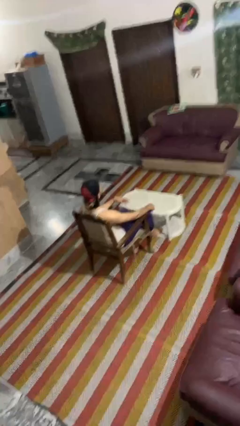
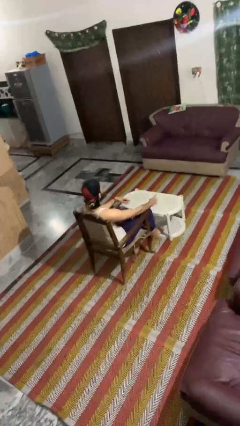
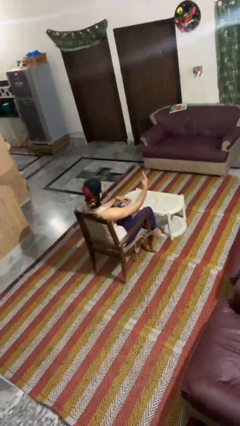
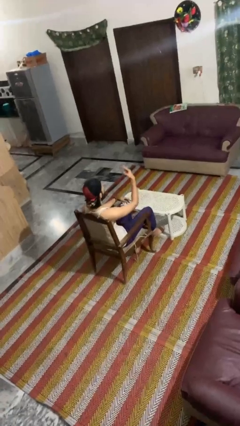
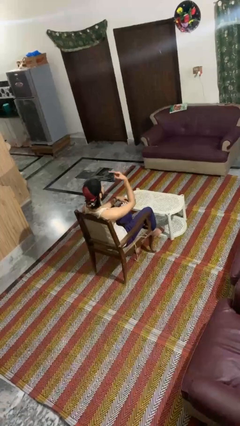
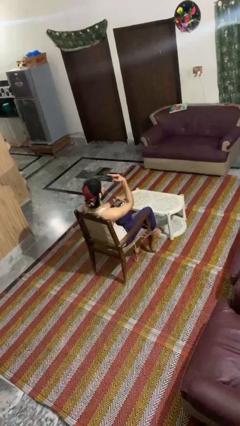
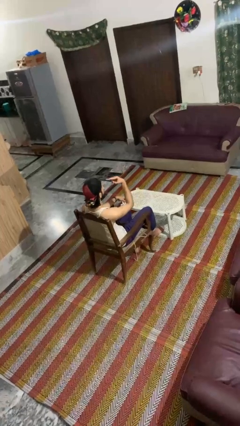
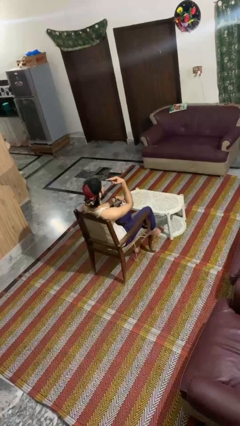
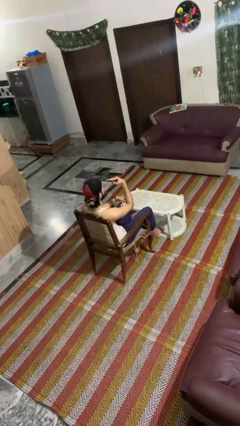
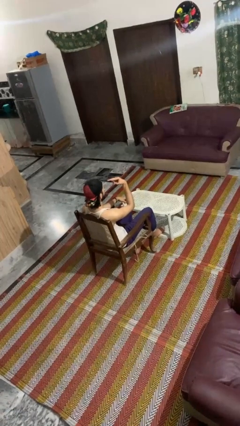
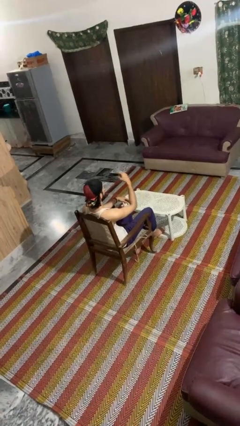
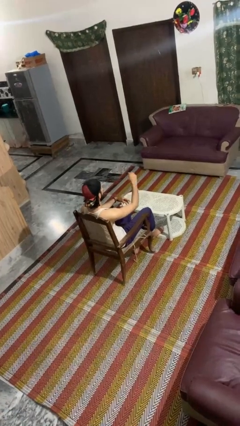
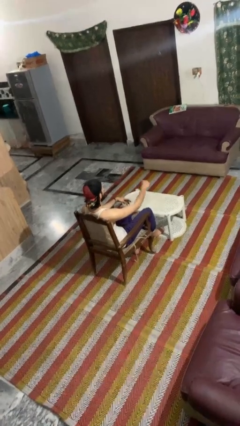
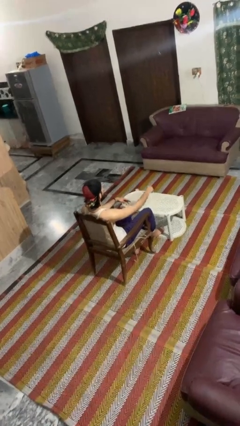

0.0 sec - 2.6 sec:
person gestures watch closely

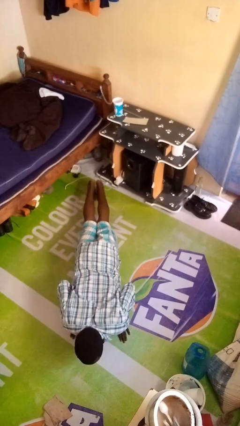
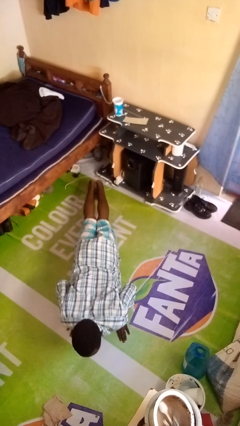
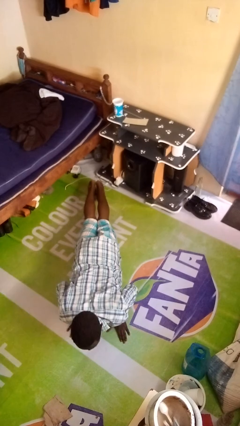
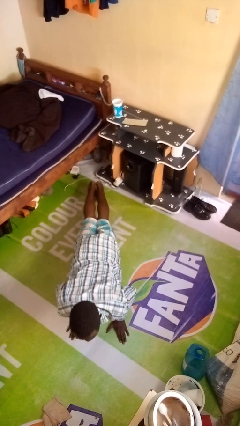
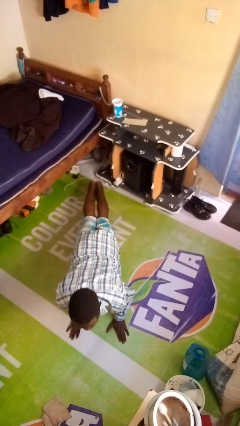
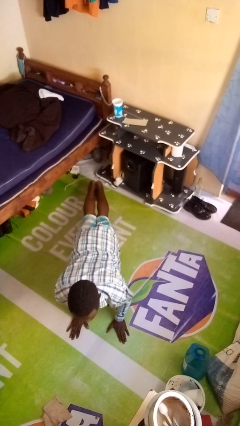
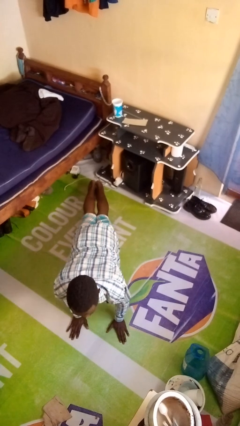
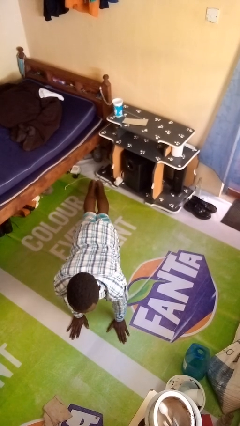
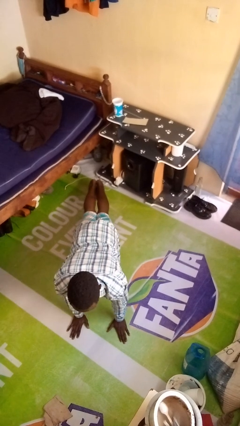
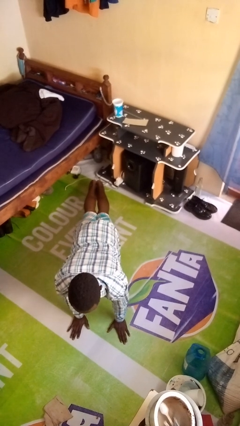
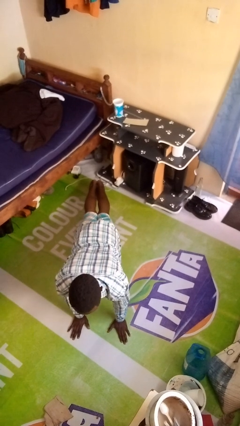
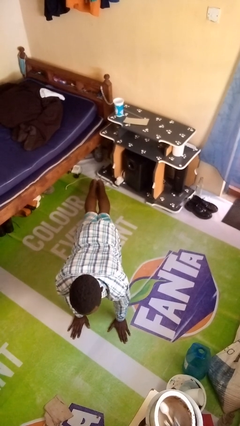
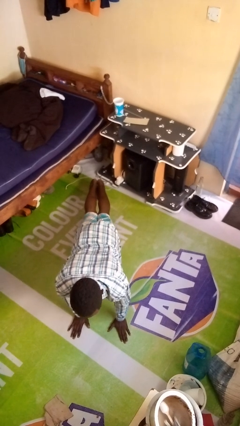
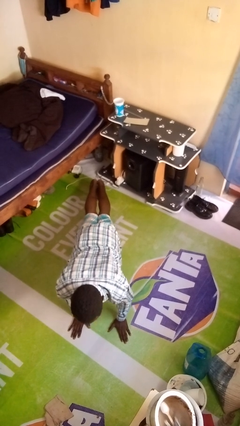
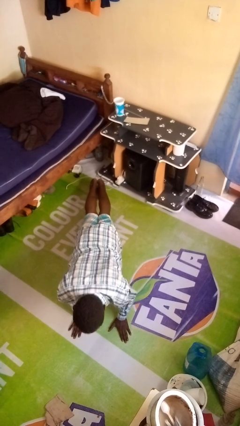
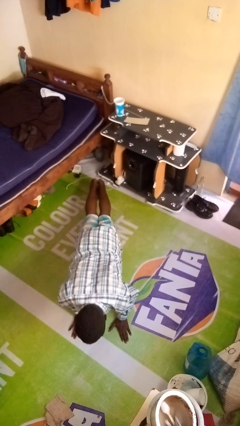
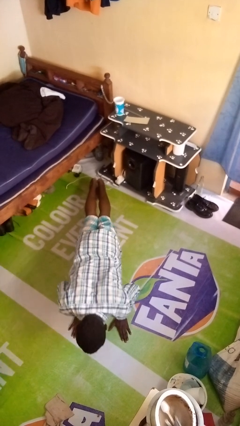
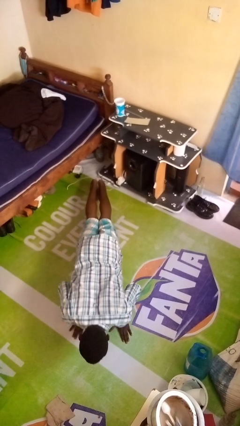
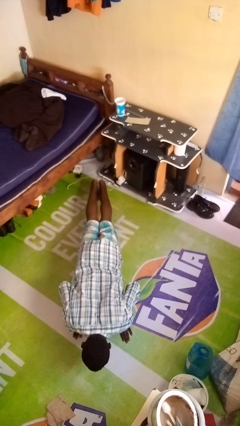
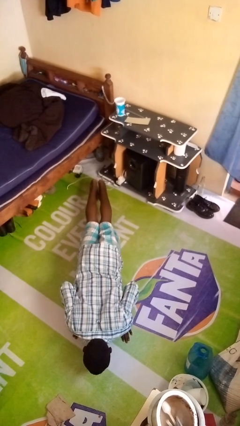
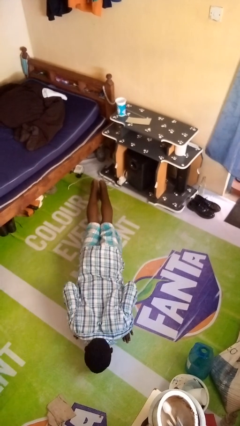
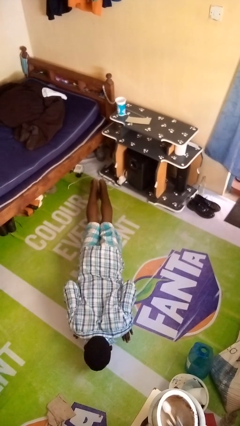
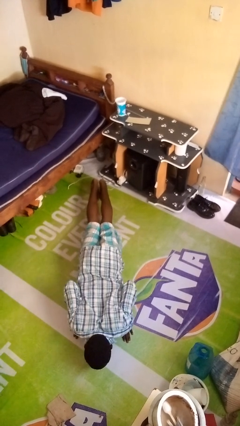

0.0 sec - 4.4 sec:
person exercises with pushup

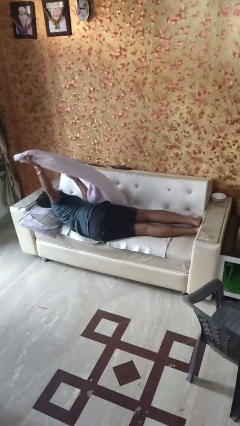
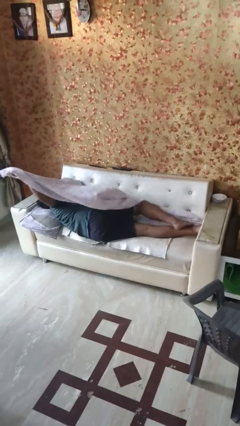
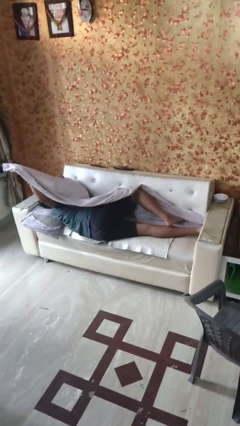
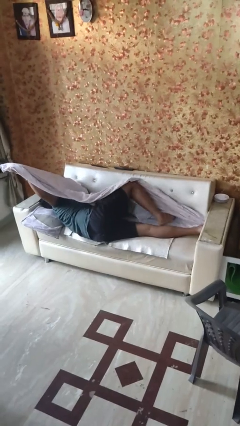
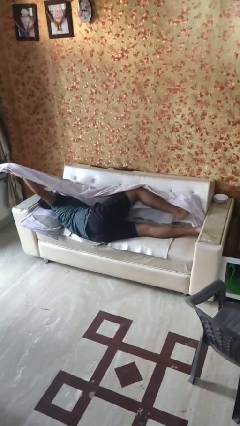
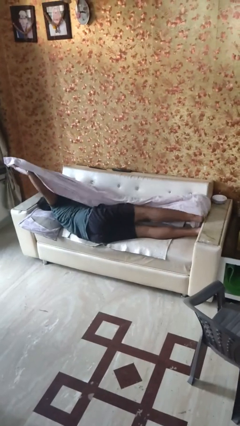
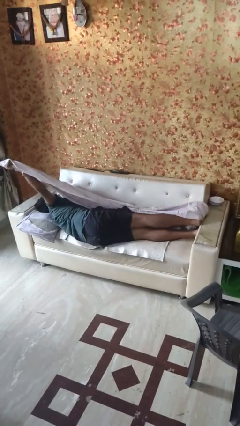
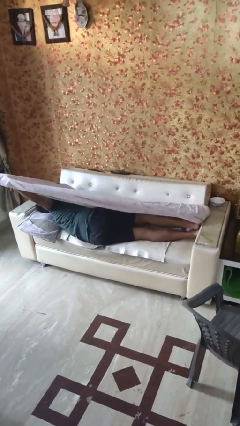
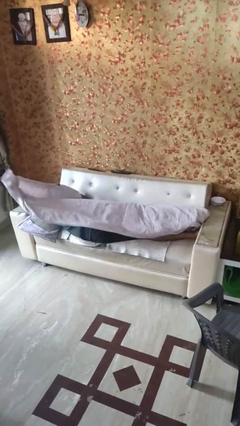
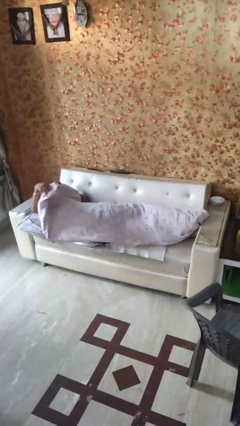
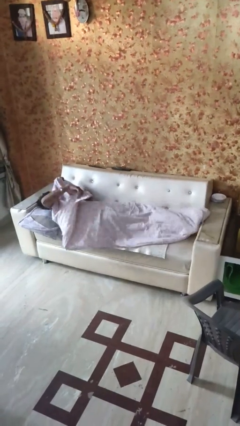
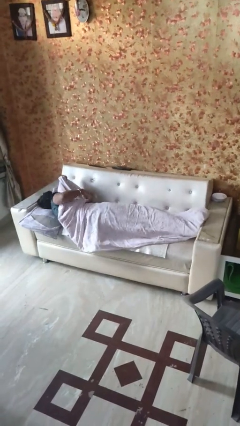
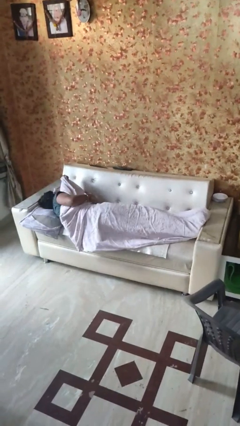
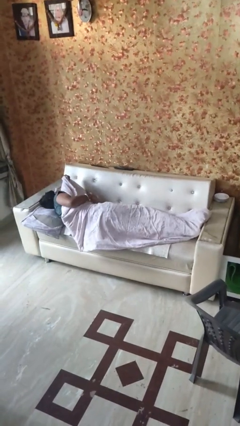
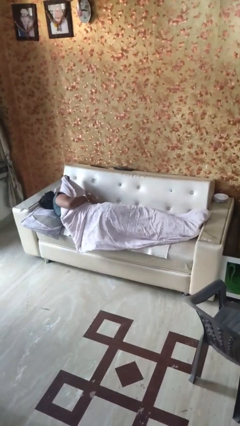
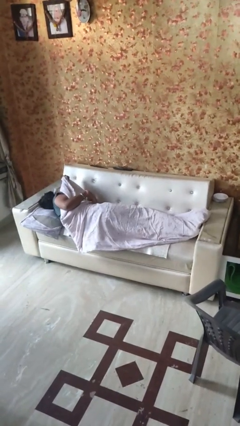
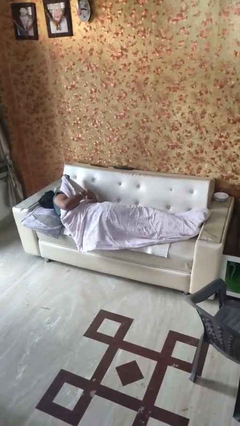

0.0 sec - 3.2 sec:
person covers with bedsheets

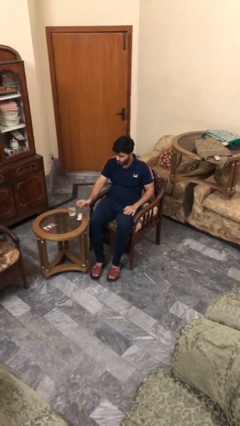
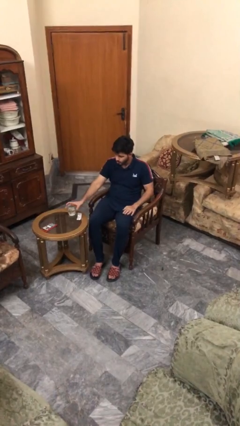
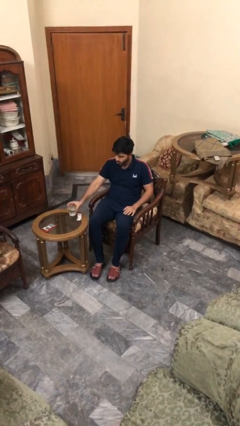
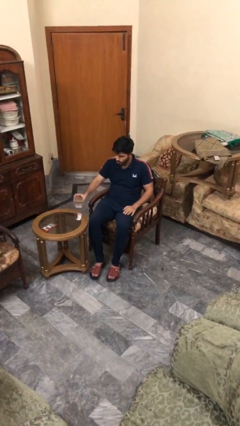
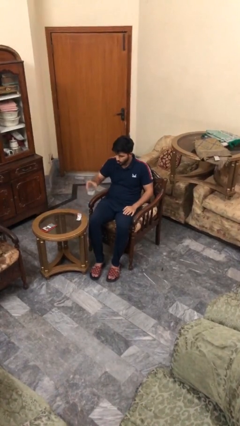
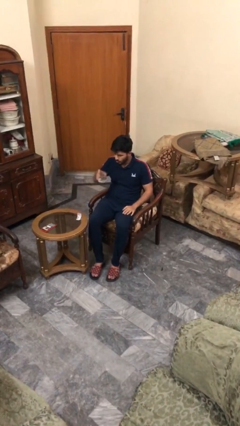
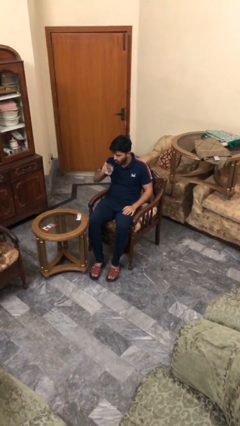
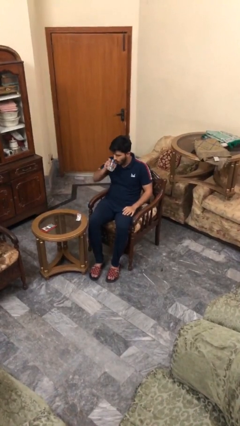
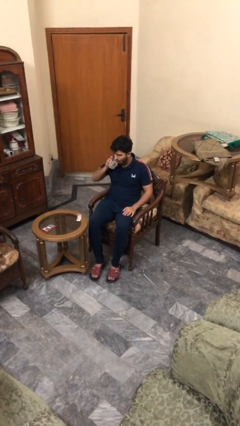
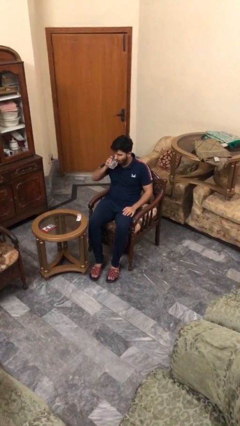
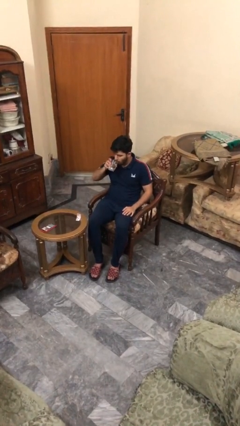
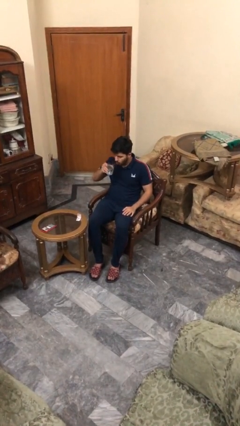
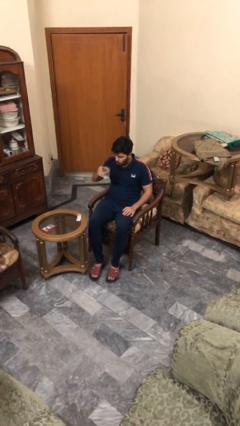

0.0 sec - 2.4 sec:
person drinks from cup

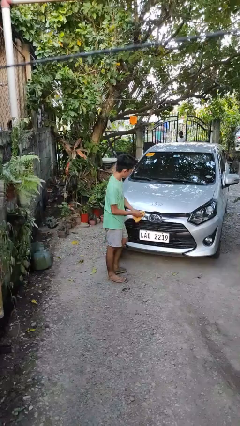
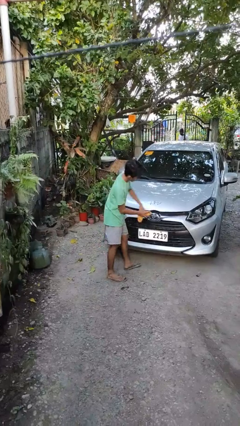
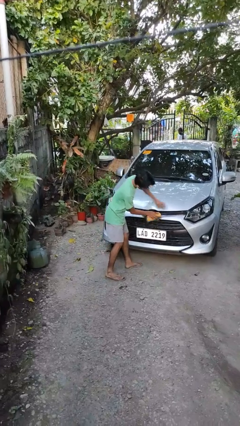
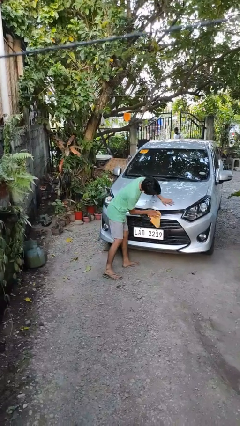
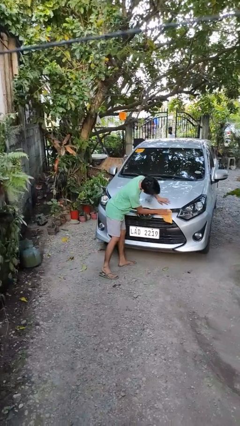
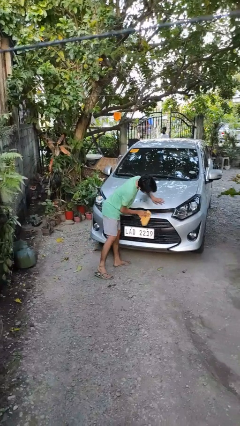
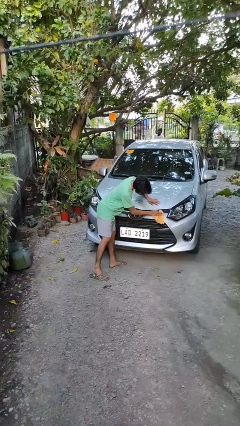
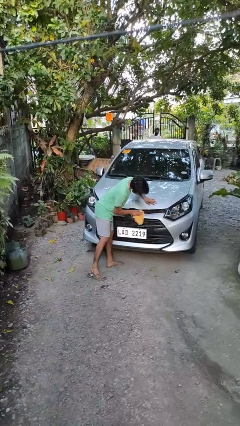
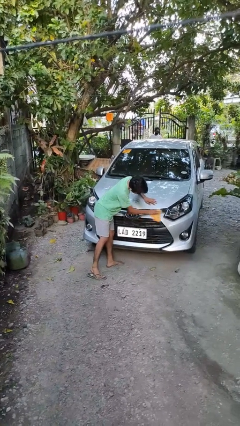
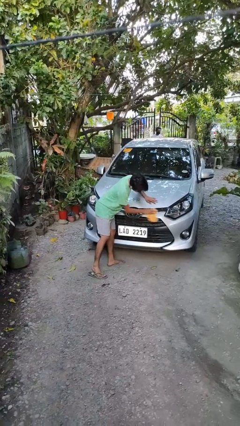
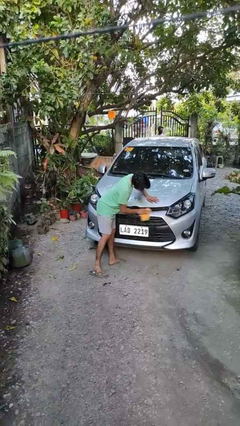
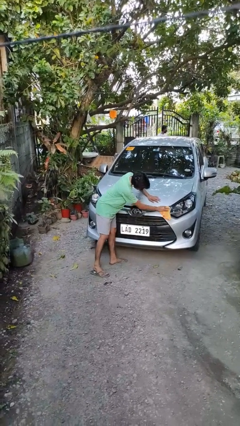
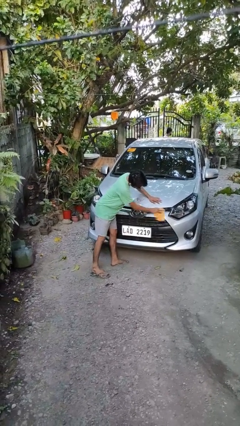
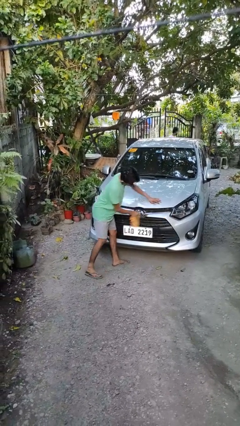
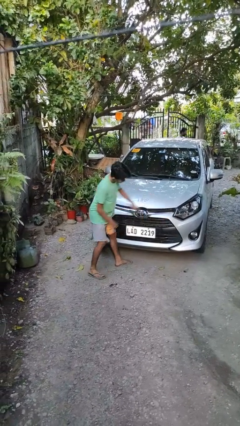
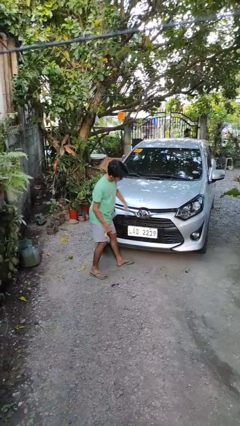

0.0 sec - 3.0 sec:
person polishes car with rag

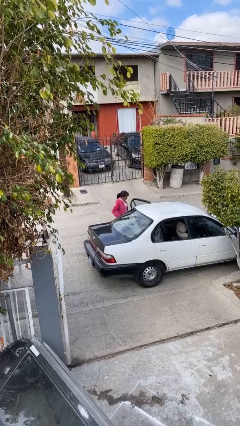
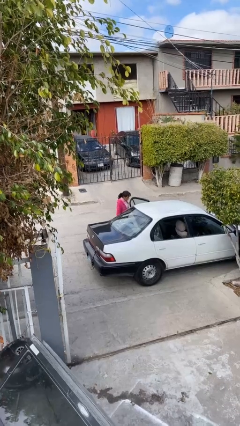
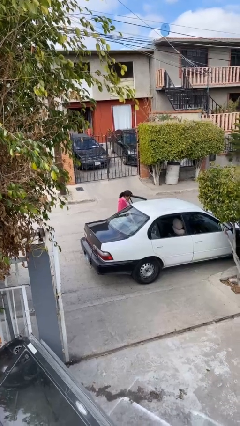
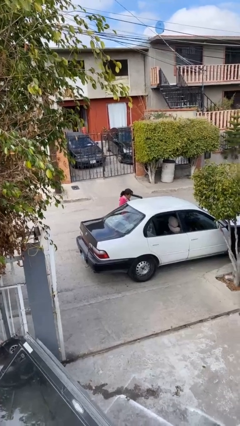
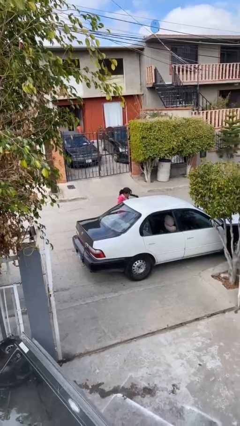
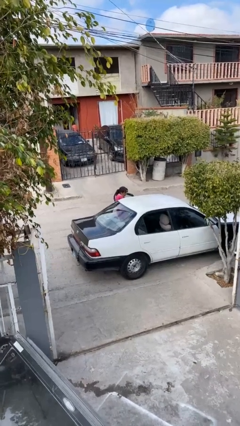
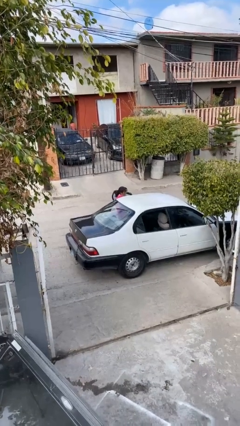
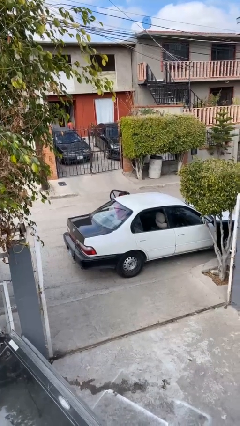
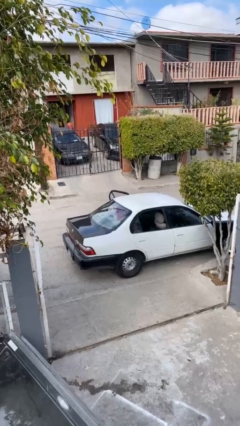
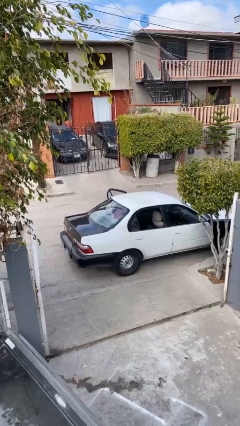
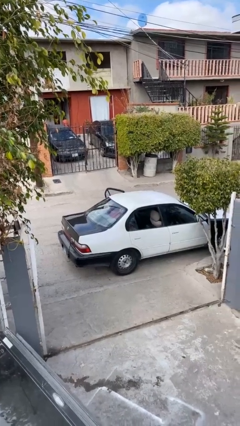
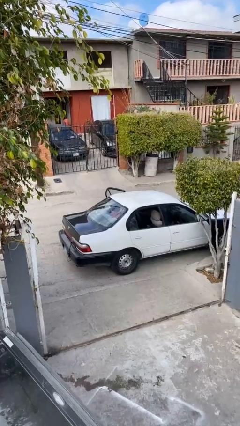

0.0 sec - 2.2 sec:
person enters car
